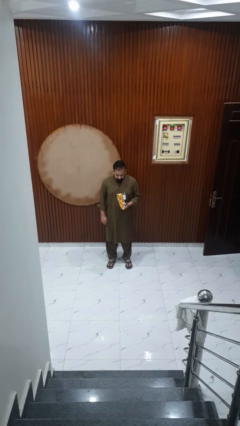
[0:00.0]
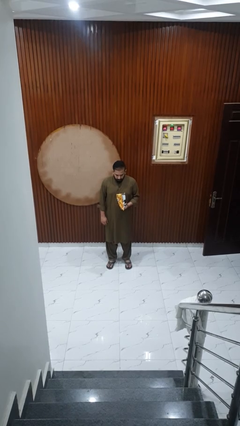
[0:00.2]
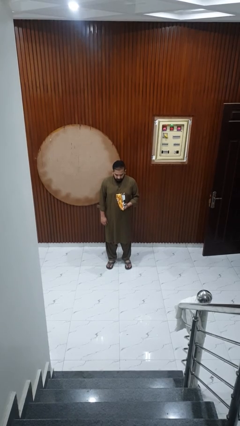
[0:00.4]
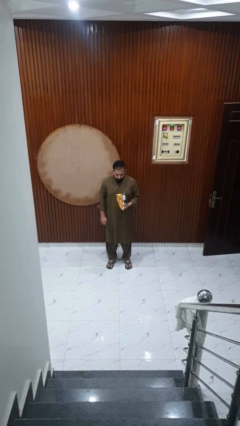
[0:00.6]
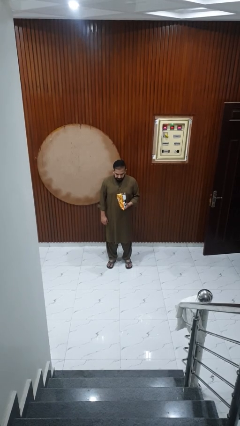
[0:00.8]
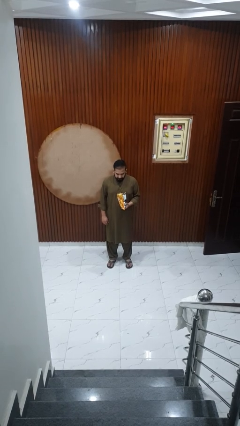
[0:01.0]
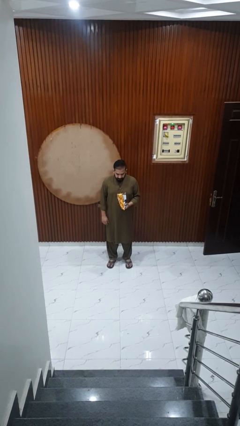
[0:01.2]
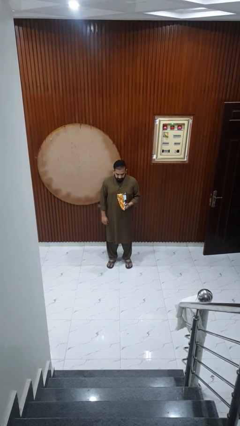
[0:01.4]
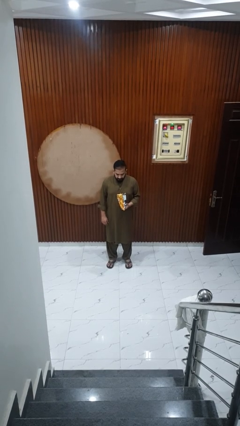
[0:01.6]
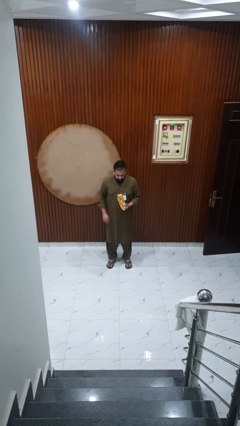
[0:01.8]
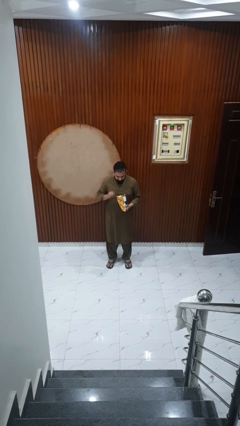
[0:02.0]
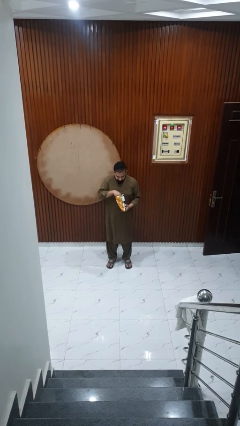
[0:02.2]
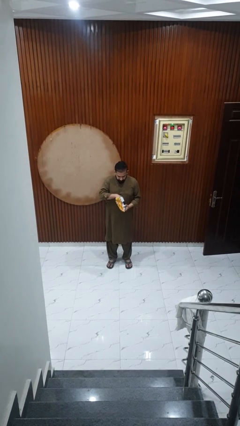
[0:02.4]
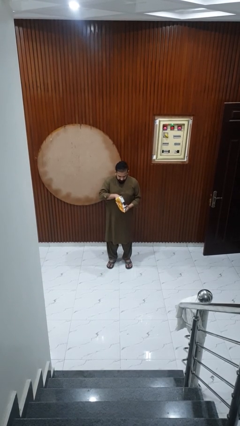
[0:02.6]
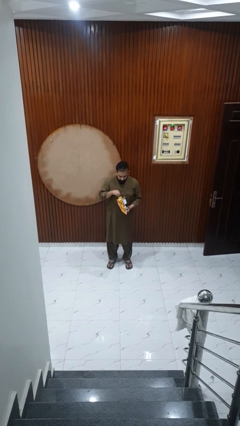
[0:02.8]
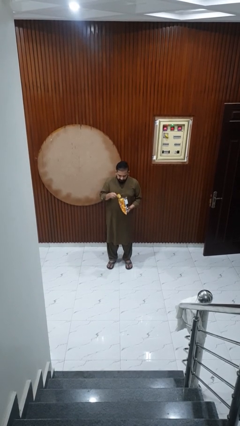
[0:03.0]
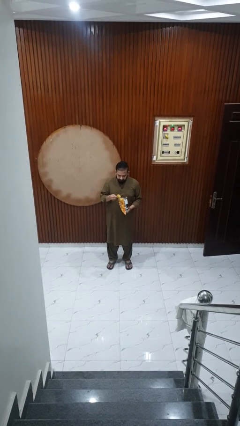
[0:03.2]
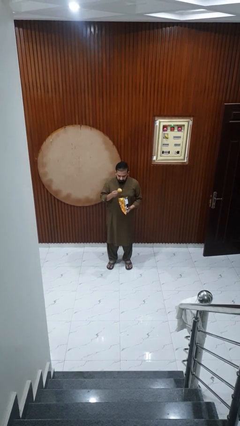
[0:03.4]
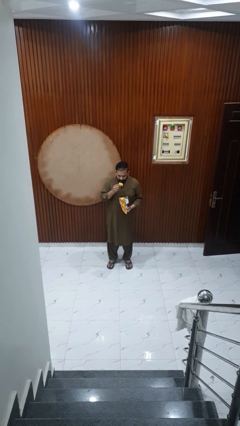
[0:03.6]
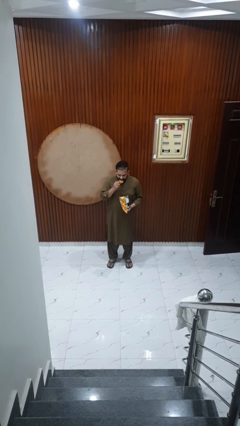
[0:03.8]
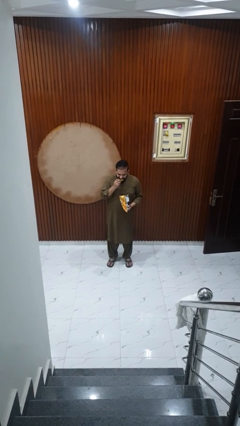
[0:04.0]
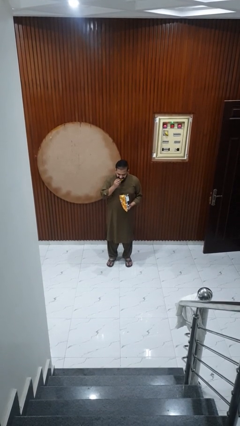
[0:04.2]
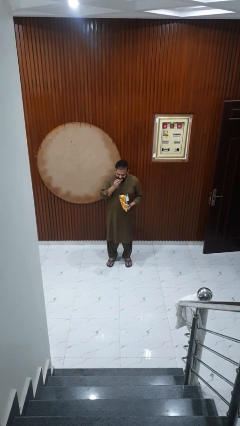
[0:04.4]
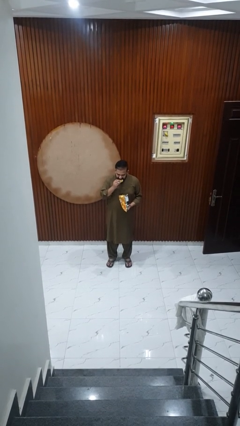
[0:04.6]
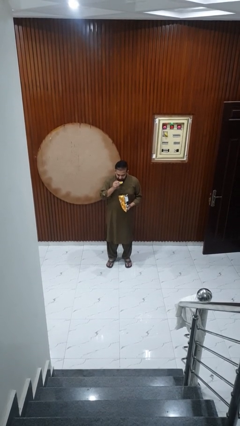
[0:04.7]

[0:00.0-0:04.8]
person eats snack from bag

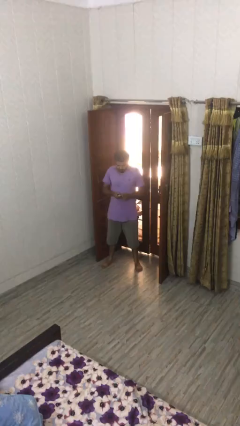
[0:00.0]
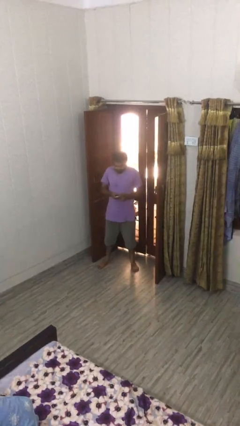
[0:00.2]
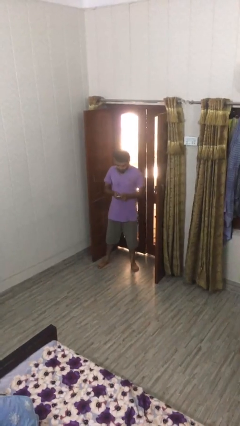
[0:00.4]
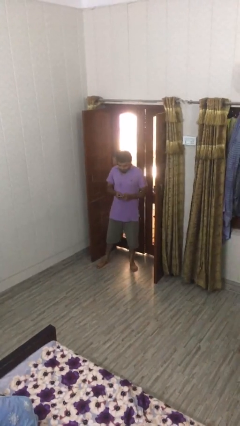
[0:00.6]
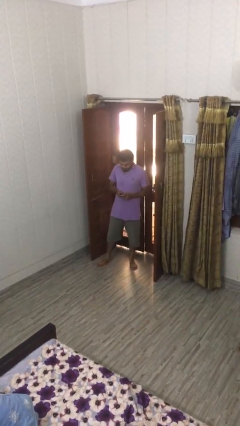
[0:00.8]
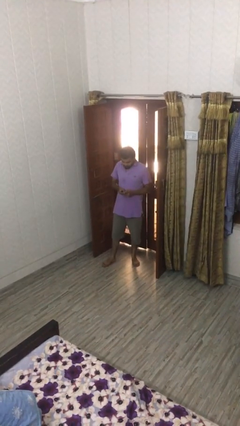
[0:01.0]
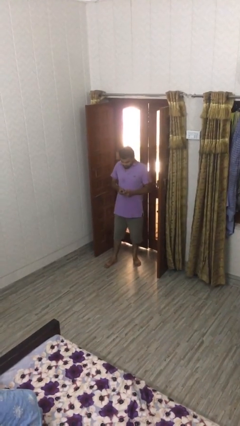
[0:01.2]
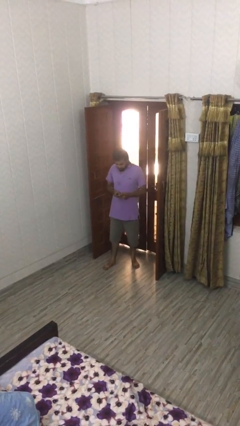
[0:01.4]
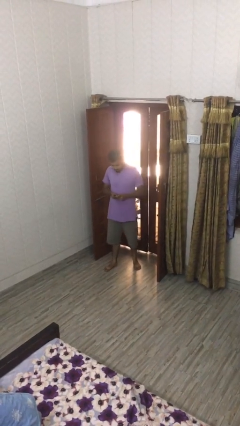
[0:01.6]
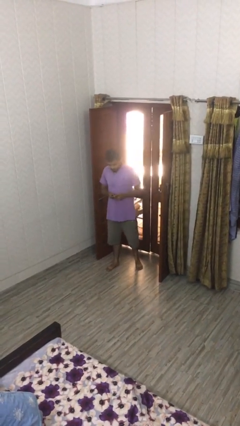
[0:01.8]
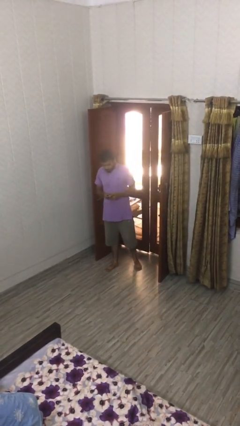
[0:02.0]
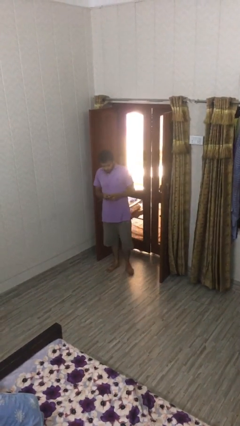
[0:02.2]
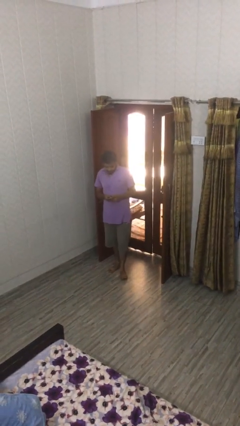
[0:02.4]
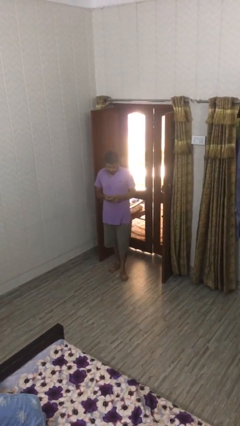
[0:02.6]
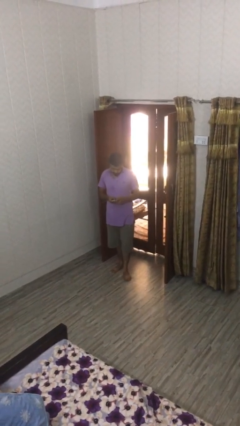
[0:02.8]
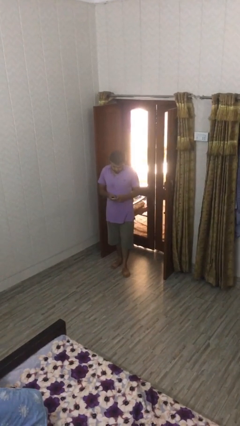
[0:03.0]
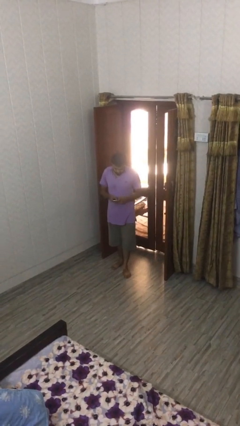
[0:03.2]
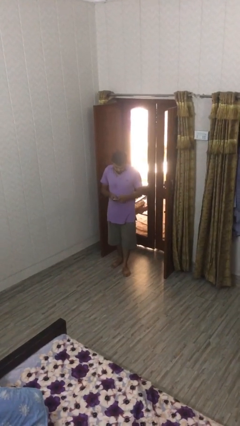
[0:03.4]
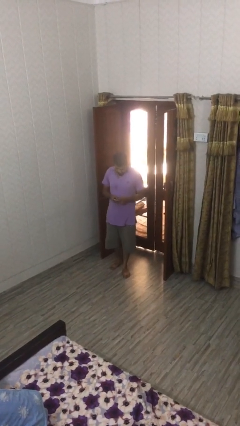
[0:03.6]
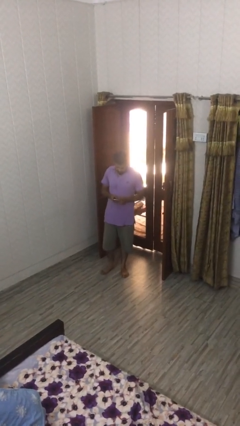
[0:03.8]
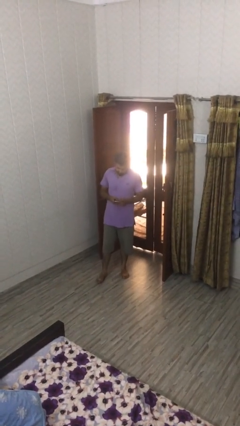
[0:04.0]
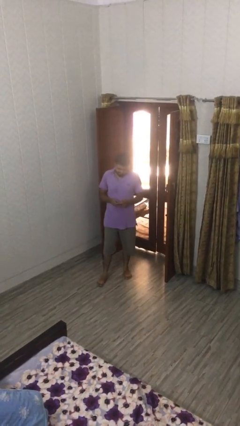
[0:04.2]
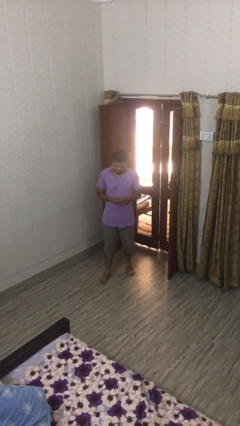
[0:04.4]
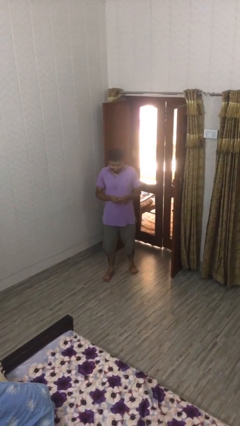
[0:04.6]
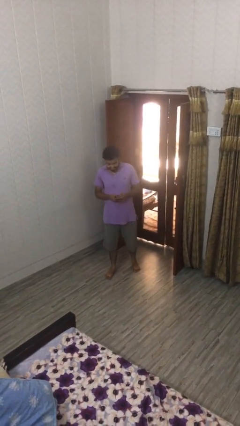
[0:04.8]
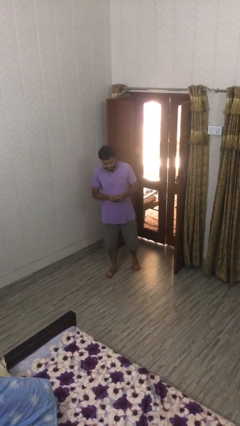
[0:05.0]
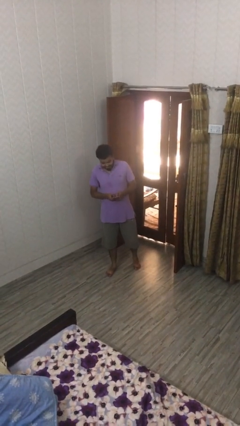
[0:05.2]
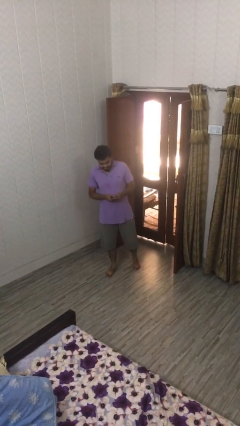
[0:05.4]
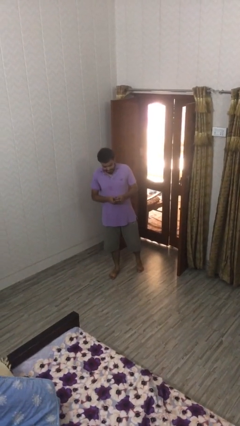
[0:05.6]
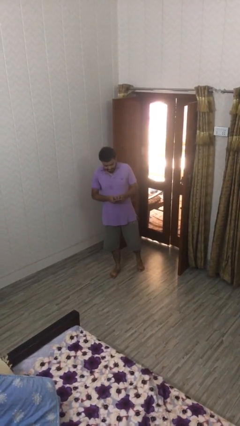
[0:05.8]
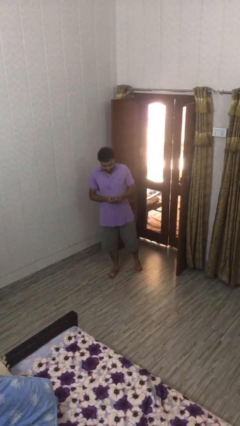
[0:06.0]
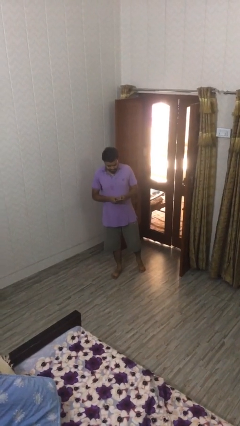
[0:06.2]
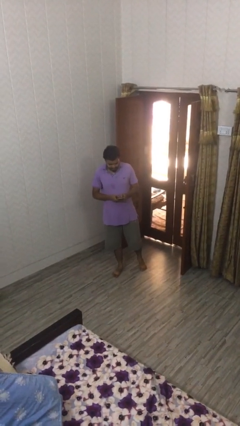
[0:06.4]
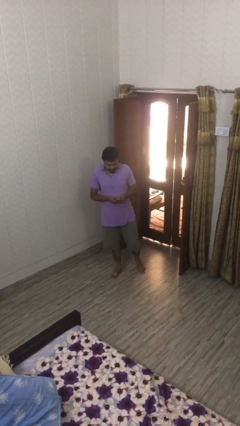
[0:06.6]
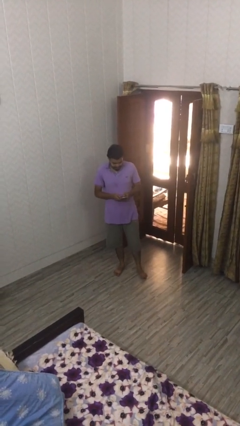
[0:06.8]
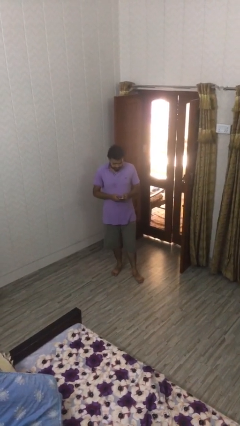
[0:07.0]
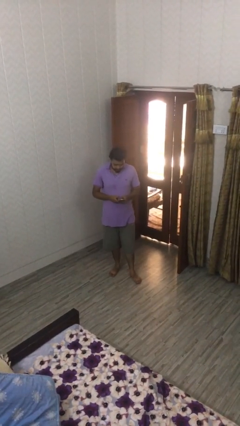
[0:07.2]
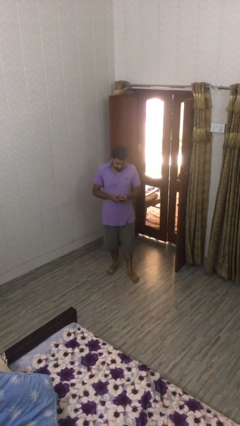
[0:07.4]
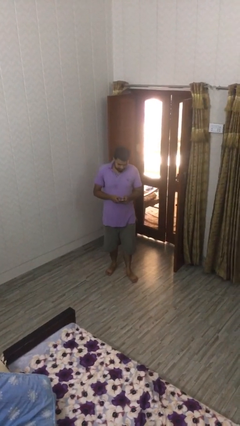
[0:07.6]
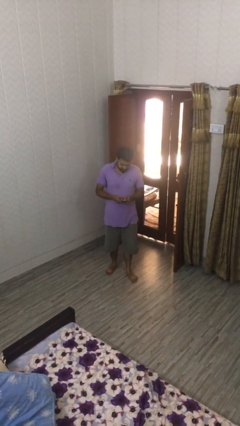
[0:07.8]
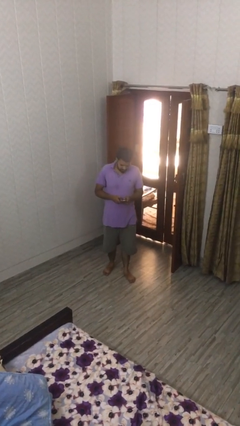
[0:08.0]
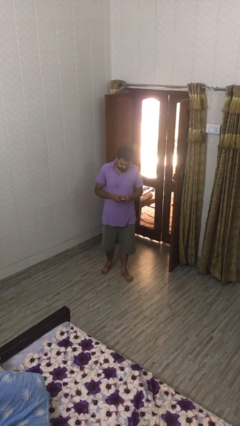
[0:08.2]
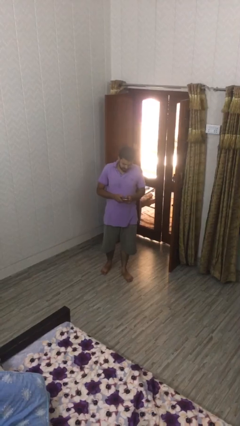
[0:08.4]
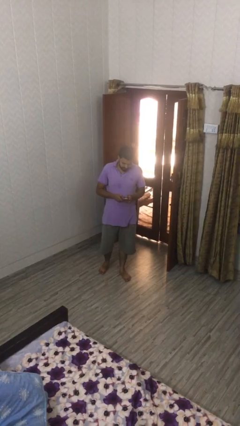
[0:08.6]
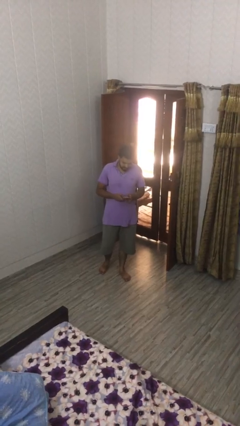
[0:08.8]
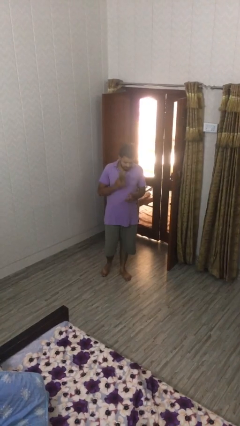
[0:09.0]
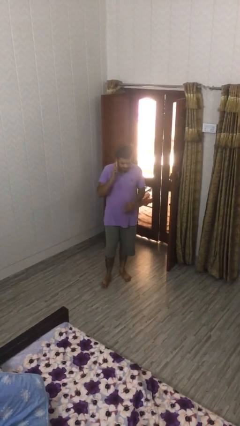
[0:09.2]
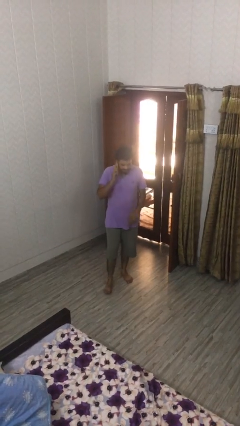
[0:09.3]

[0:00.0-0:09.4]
person texts on phone

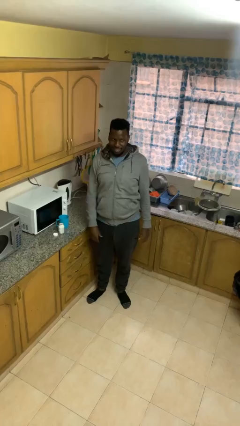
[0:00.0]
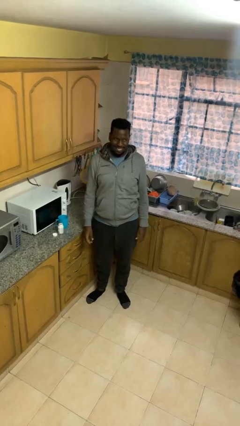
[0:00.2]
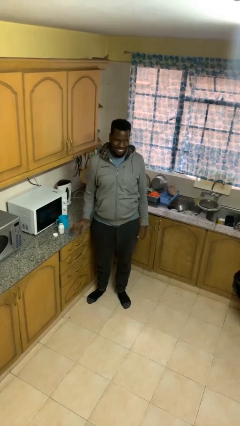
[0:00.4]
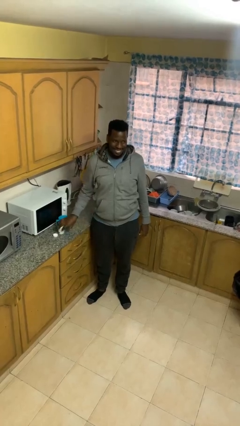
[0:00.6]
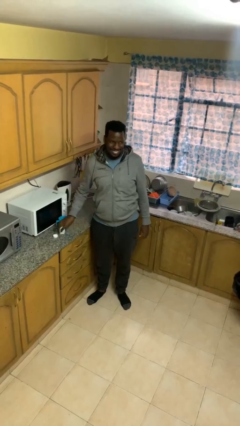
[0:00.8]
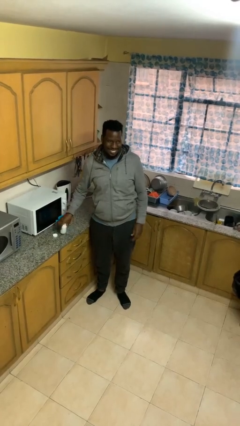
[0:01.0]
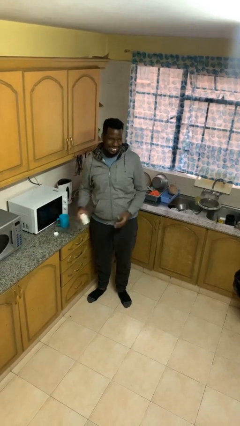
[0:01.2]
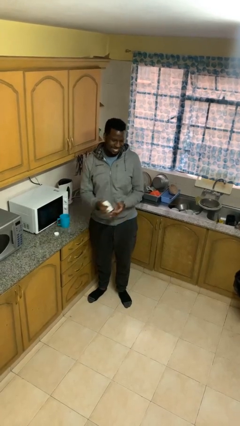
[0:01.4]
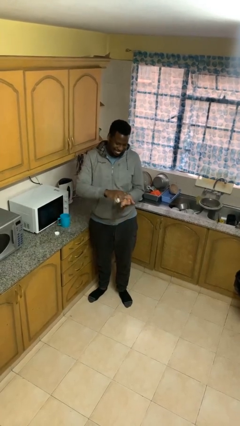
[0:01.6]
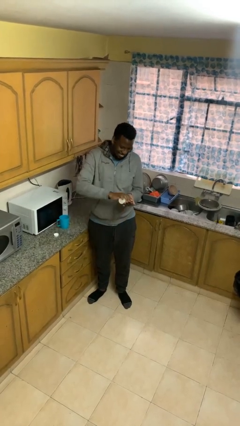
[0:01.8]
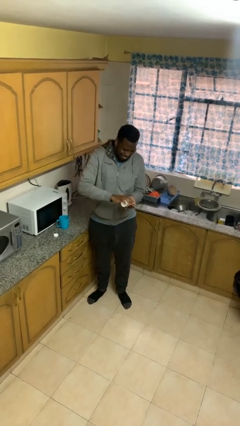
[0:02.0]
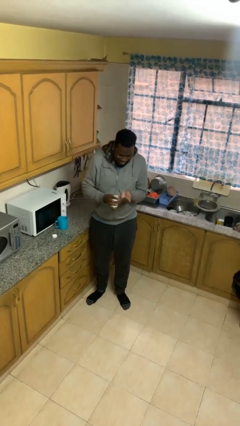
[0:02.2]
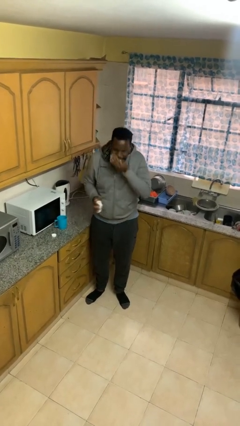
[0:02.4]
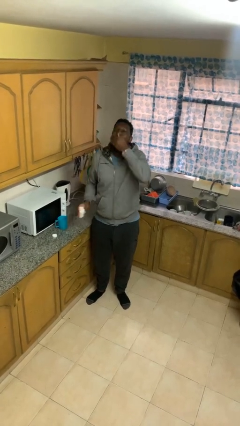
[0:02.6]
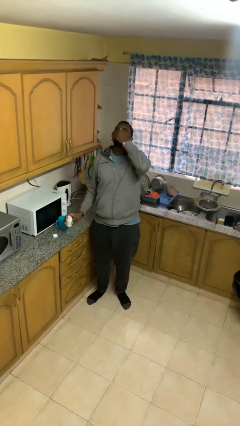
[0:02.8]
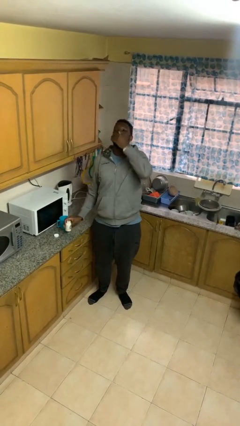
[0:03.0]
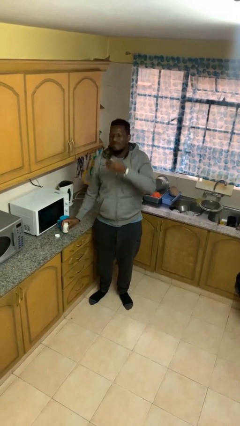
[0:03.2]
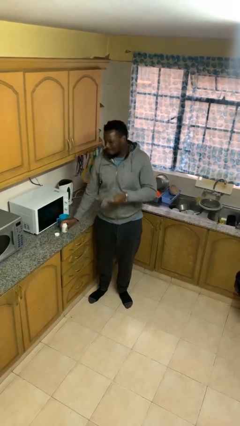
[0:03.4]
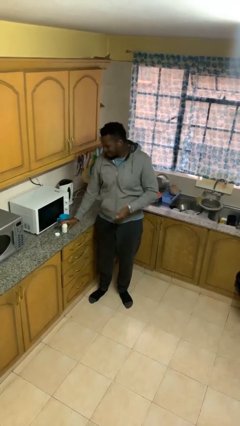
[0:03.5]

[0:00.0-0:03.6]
person takes medicine pills
